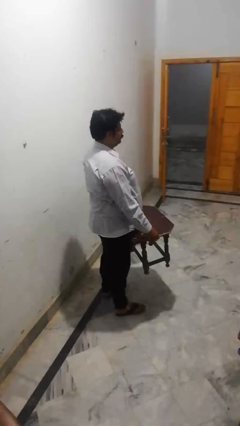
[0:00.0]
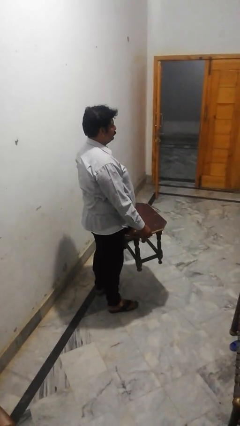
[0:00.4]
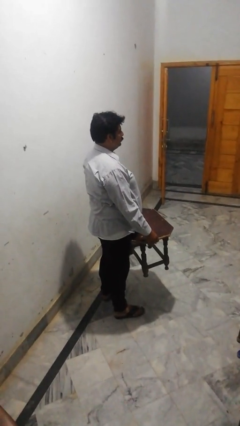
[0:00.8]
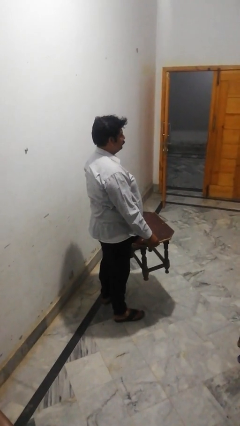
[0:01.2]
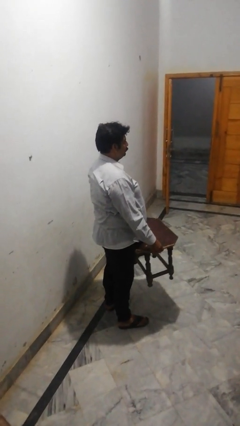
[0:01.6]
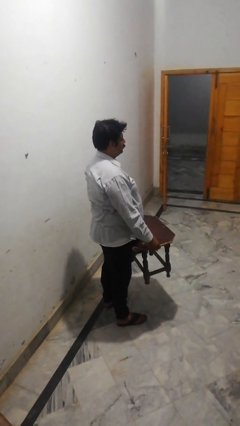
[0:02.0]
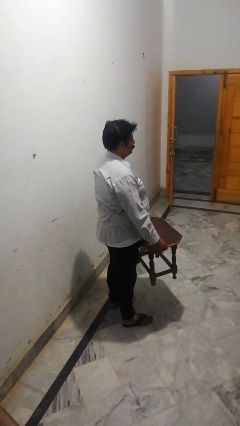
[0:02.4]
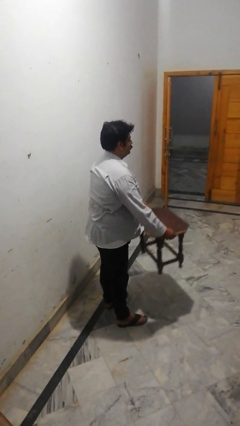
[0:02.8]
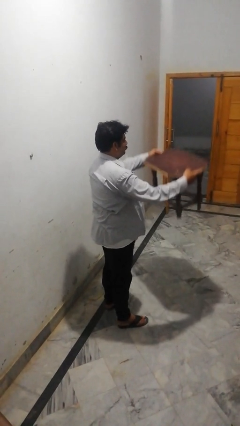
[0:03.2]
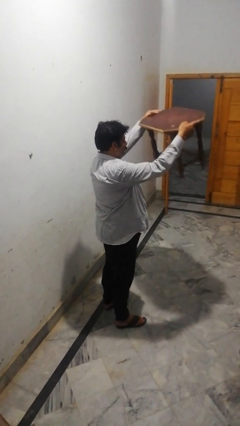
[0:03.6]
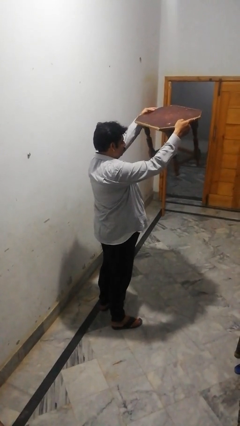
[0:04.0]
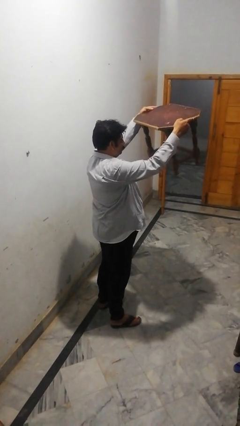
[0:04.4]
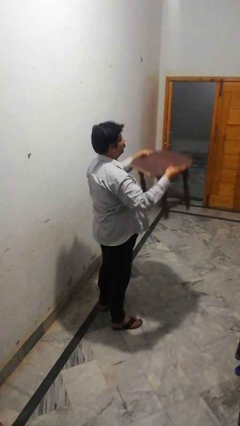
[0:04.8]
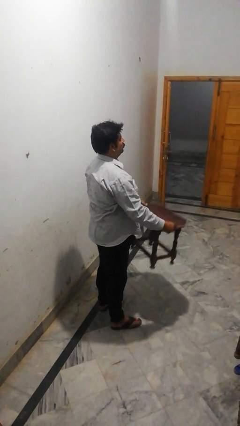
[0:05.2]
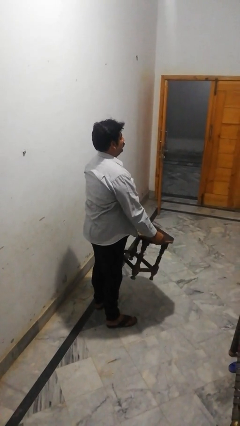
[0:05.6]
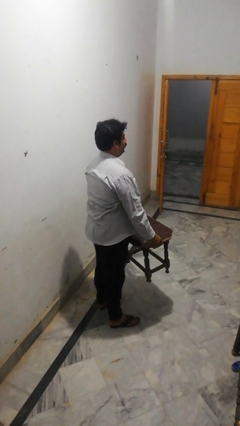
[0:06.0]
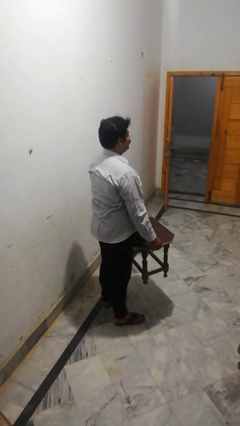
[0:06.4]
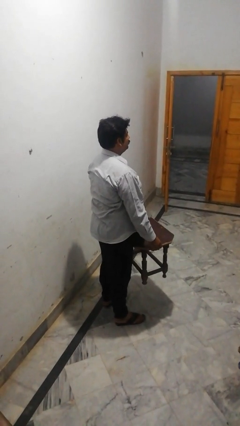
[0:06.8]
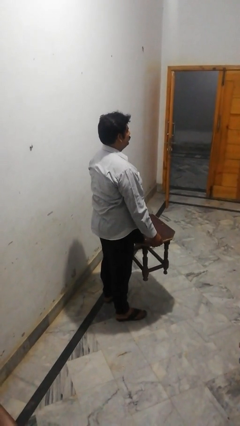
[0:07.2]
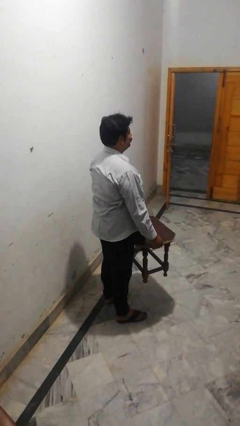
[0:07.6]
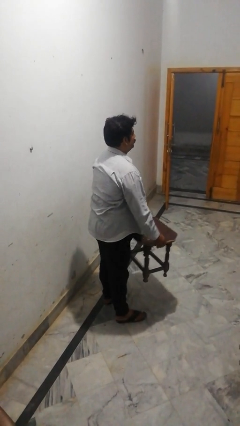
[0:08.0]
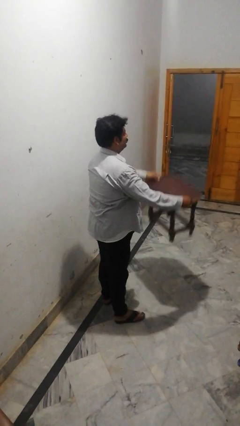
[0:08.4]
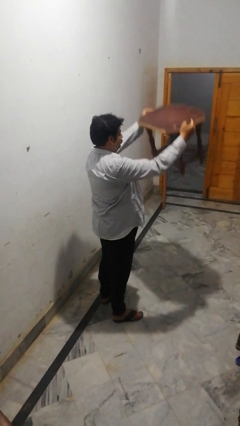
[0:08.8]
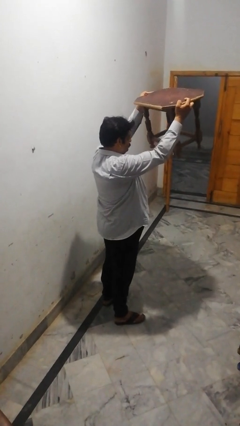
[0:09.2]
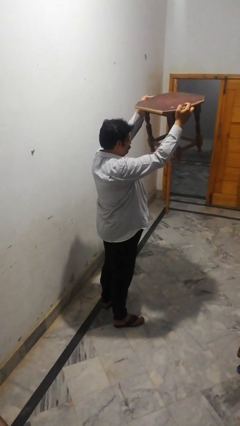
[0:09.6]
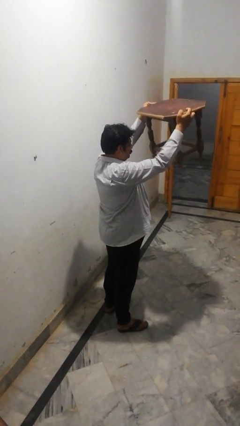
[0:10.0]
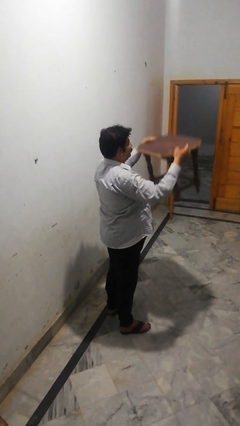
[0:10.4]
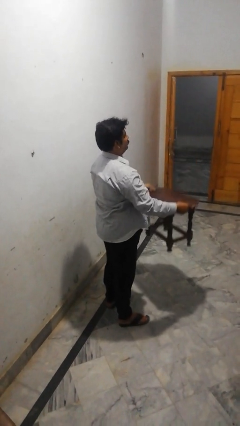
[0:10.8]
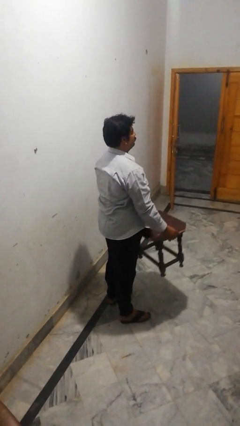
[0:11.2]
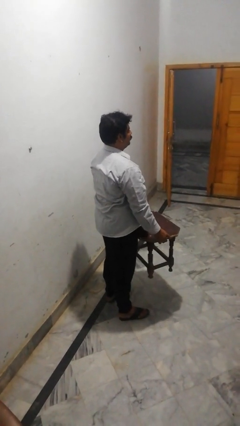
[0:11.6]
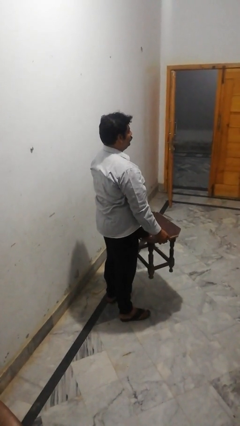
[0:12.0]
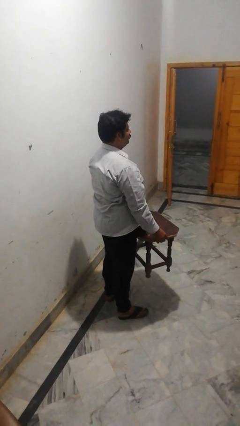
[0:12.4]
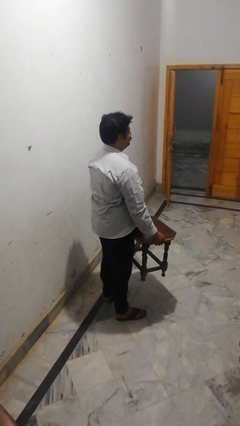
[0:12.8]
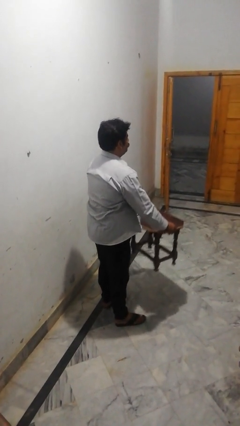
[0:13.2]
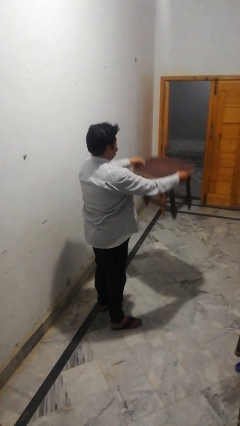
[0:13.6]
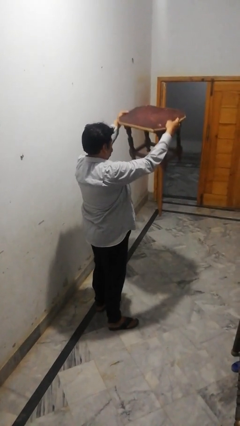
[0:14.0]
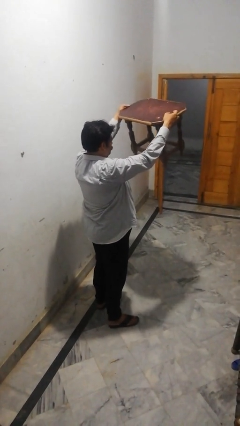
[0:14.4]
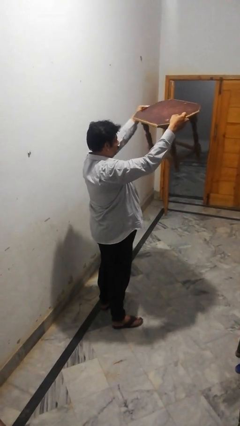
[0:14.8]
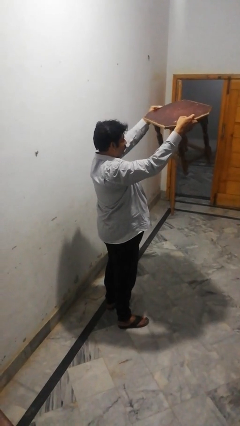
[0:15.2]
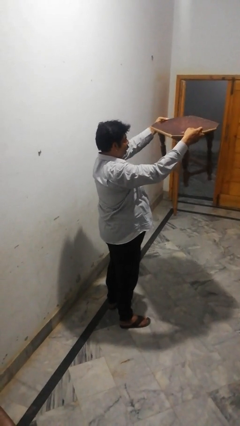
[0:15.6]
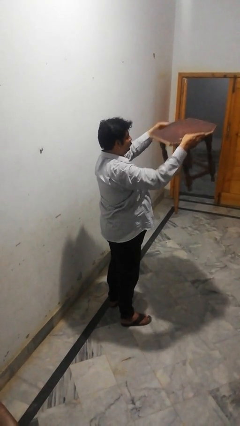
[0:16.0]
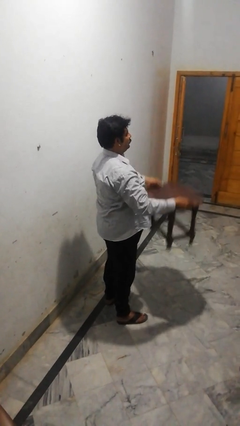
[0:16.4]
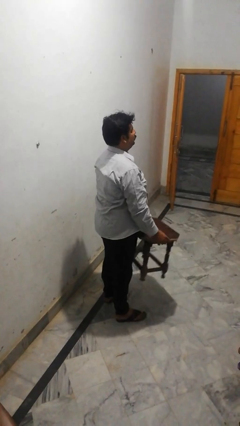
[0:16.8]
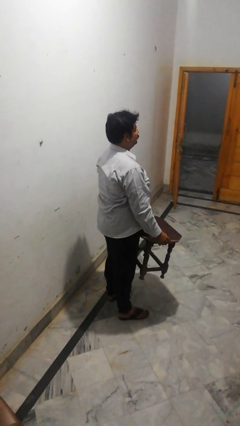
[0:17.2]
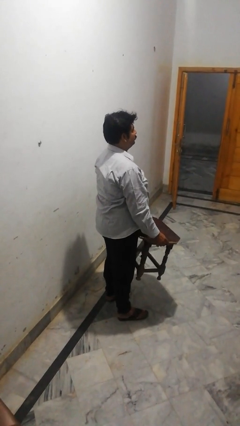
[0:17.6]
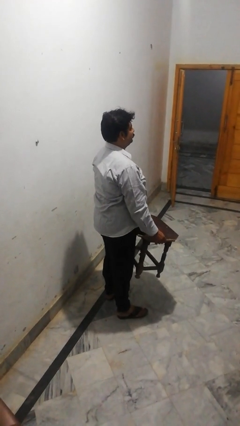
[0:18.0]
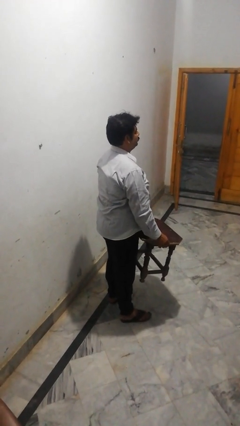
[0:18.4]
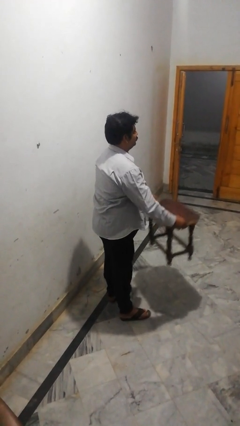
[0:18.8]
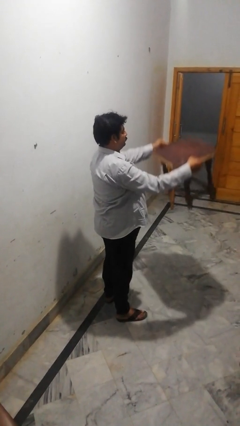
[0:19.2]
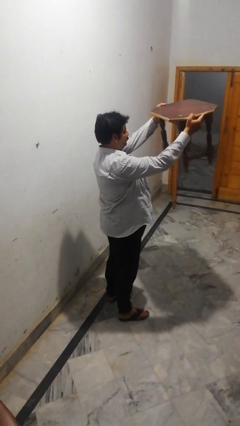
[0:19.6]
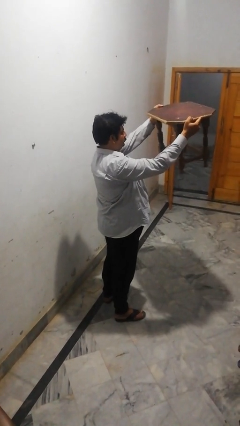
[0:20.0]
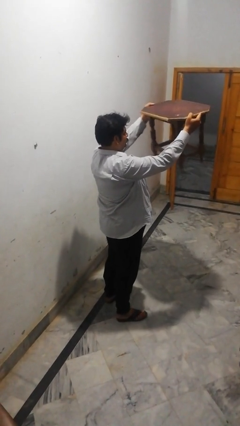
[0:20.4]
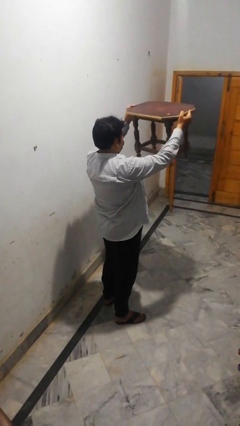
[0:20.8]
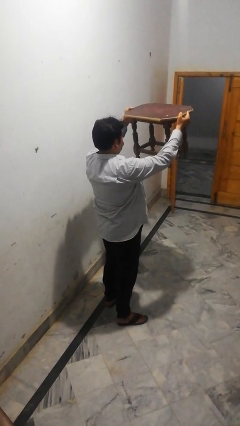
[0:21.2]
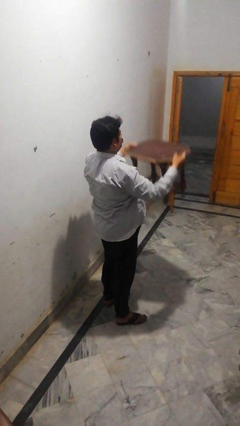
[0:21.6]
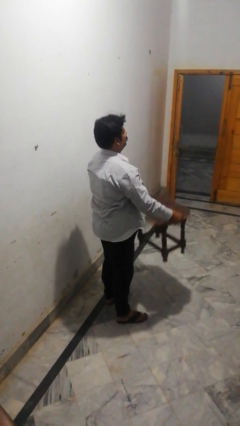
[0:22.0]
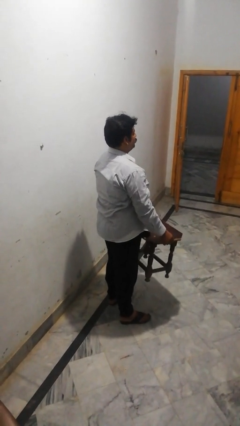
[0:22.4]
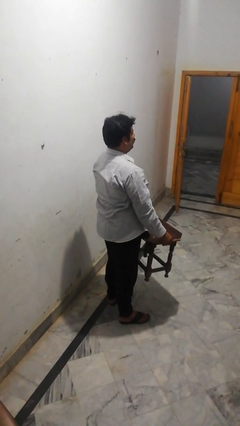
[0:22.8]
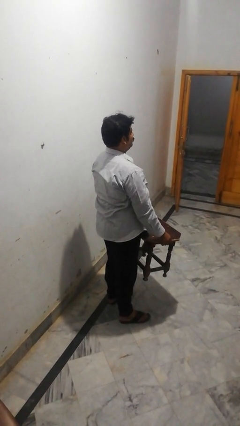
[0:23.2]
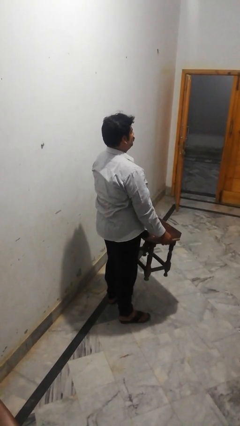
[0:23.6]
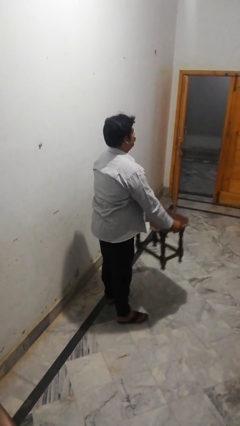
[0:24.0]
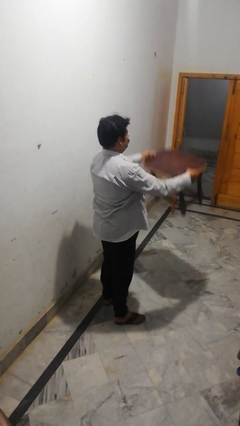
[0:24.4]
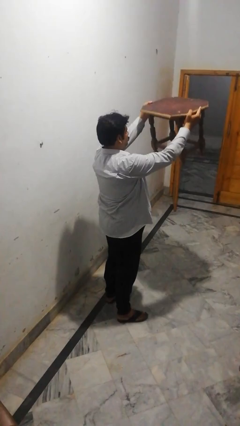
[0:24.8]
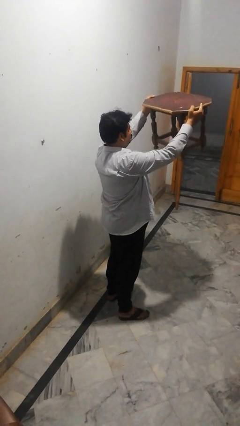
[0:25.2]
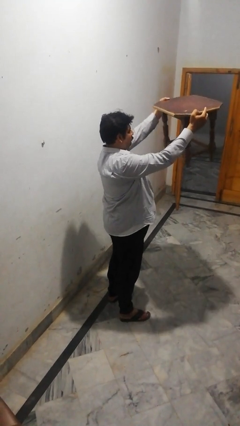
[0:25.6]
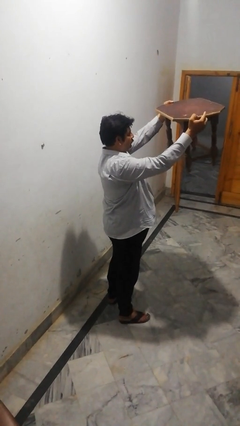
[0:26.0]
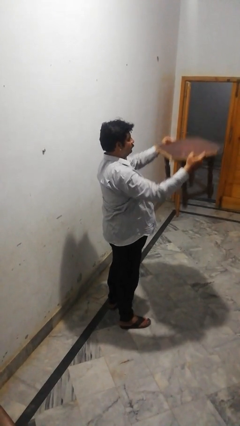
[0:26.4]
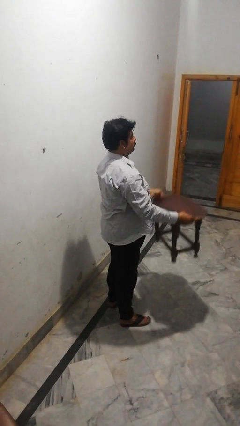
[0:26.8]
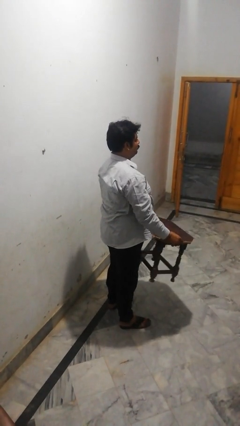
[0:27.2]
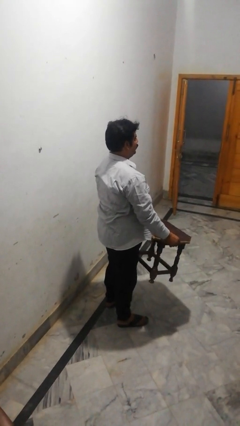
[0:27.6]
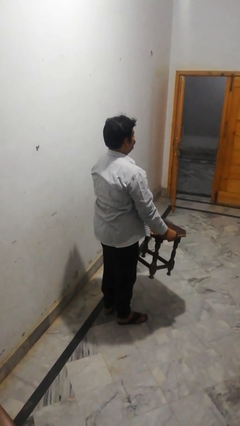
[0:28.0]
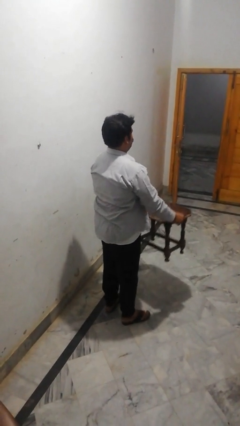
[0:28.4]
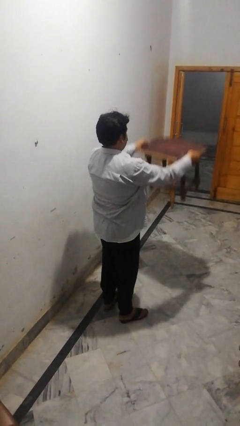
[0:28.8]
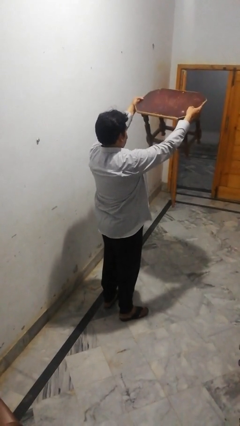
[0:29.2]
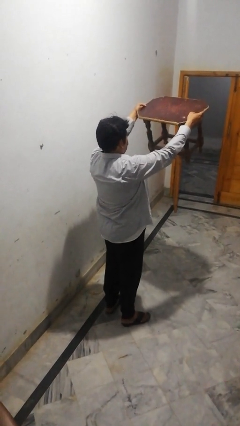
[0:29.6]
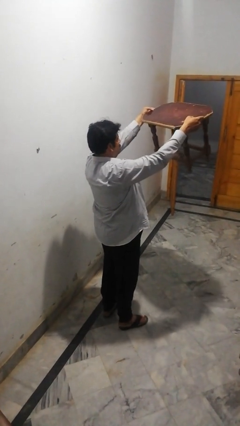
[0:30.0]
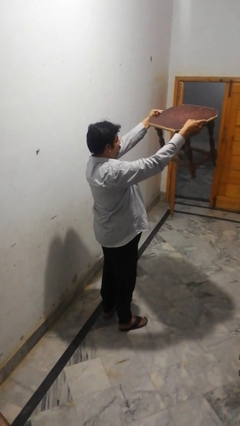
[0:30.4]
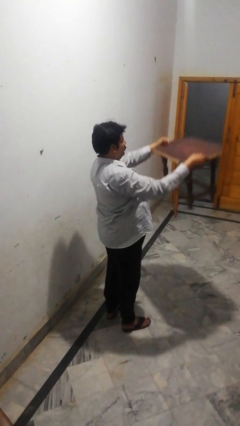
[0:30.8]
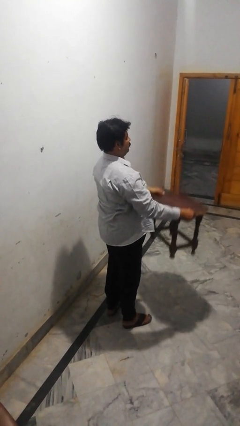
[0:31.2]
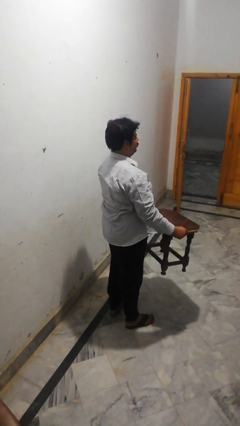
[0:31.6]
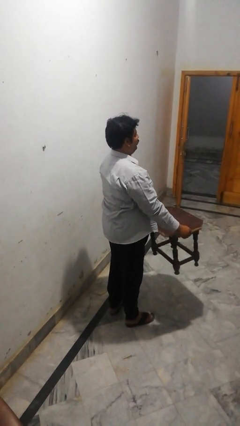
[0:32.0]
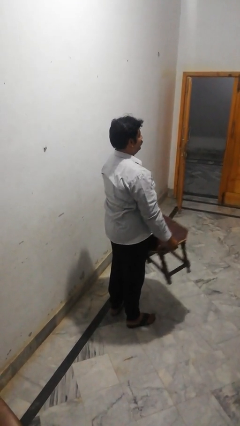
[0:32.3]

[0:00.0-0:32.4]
person holds object above head

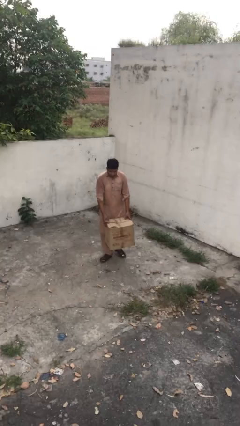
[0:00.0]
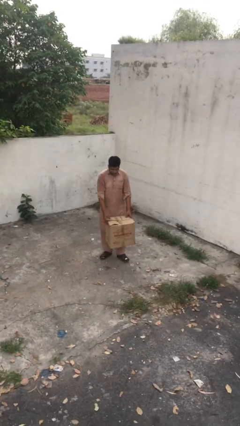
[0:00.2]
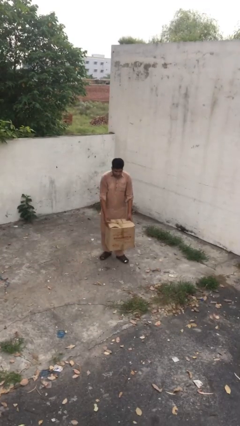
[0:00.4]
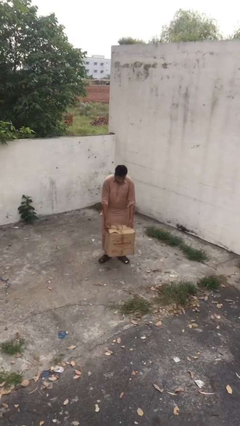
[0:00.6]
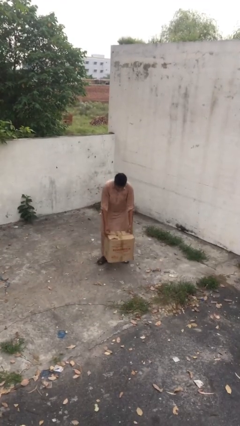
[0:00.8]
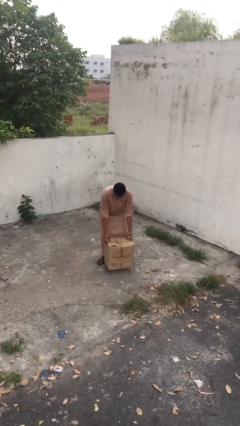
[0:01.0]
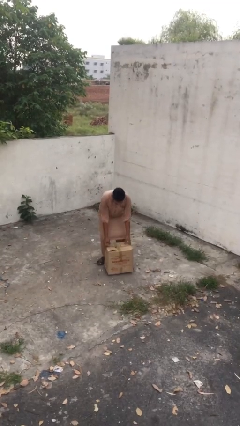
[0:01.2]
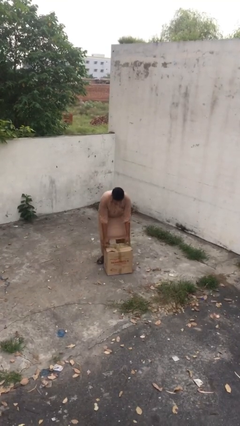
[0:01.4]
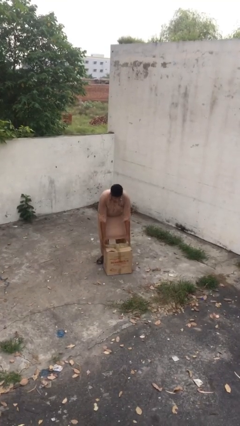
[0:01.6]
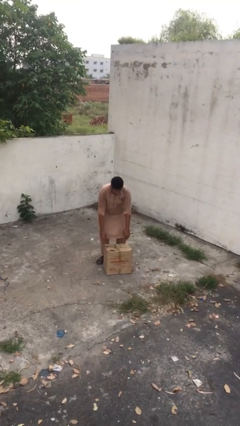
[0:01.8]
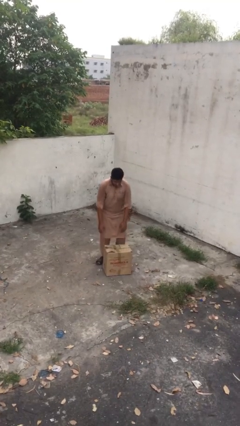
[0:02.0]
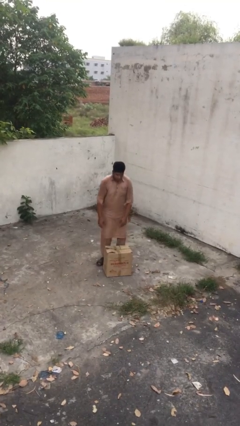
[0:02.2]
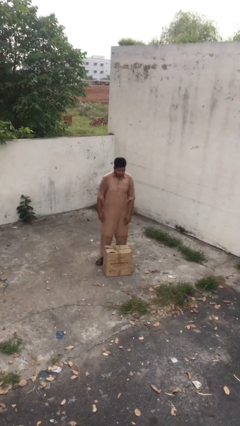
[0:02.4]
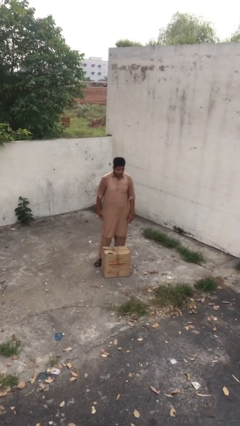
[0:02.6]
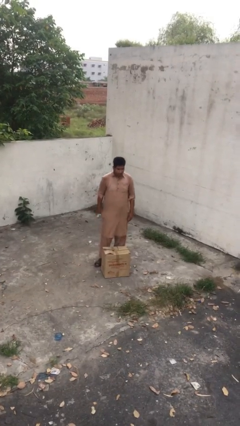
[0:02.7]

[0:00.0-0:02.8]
person puts down object on floor
